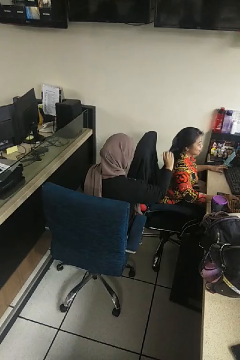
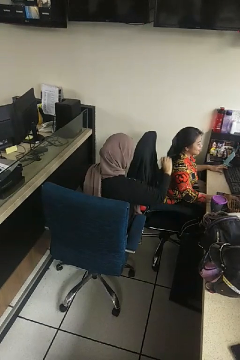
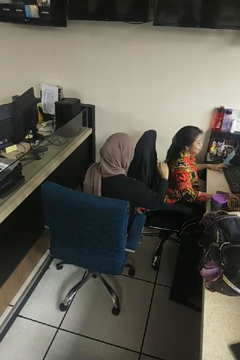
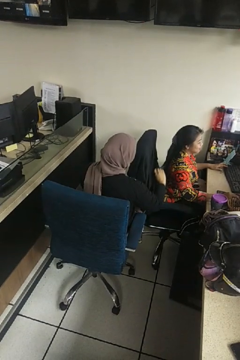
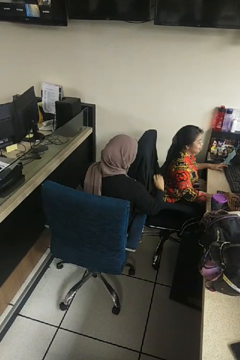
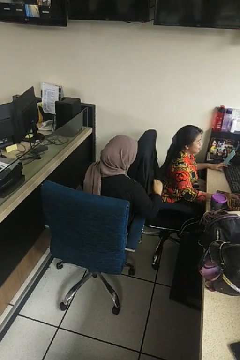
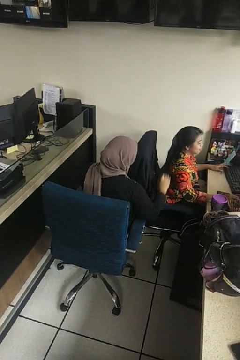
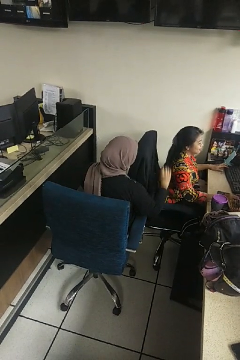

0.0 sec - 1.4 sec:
person brushes hair of person

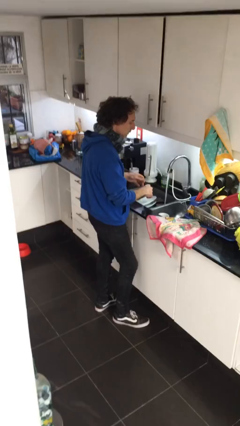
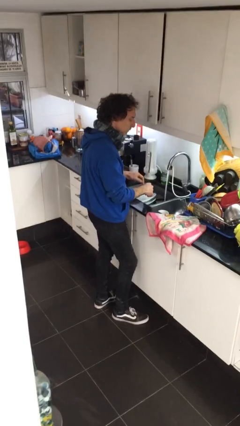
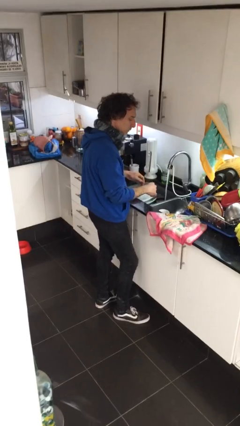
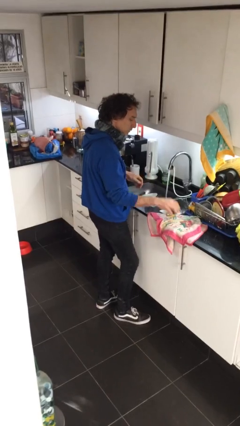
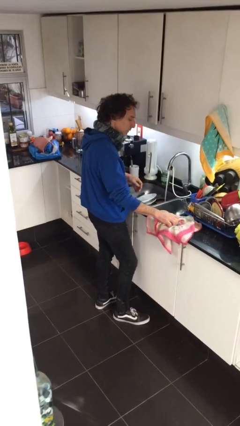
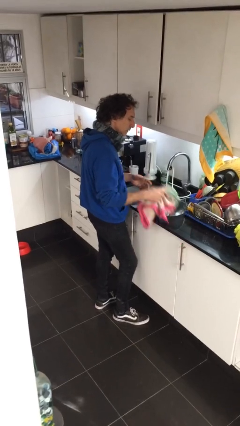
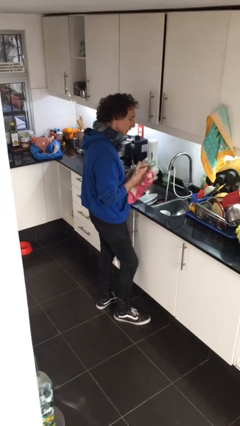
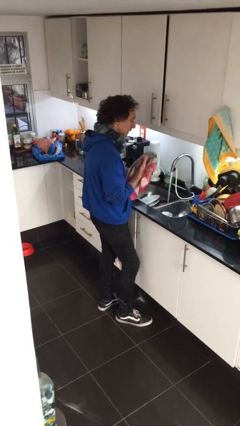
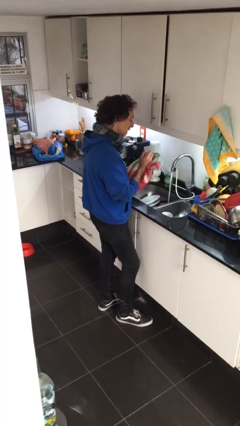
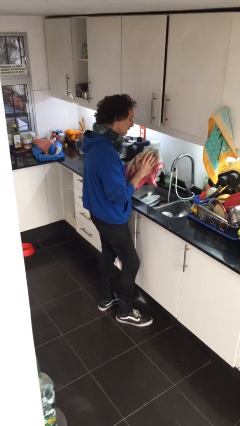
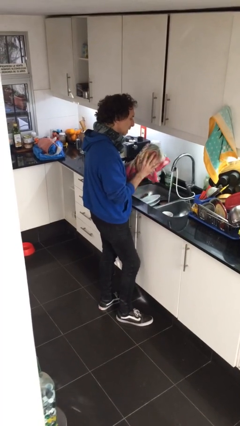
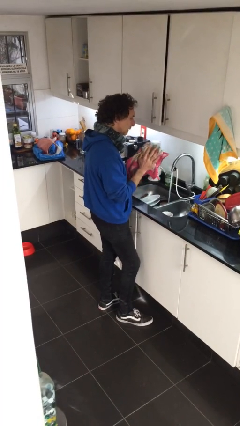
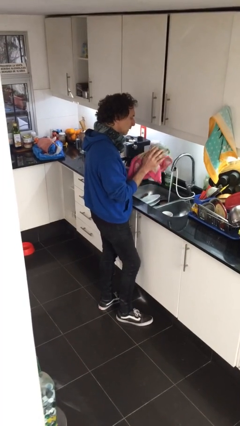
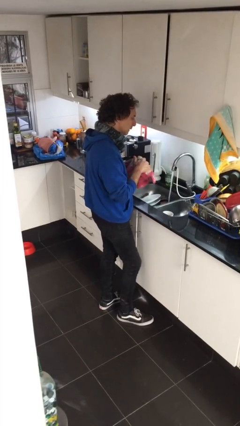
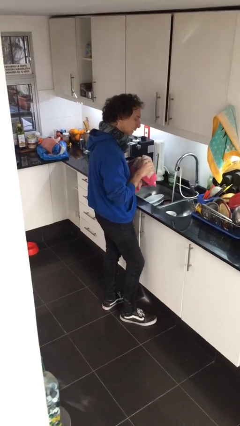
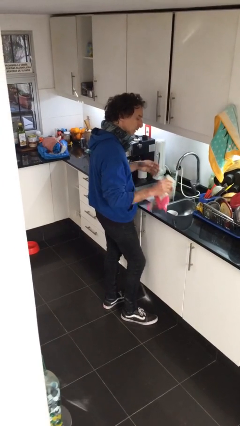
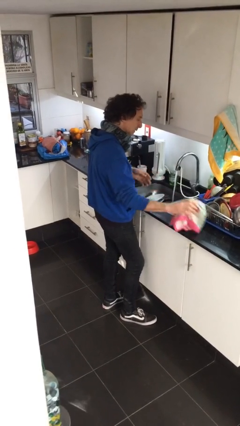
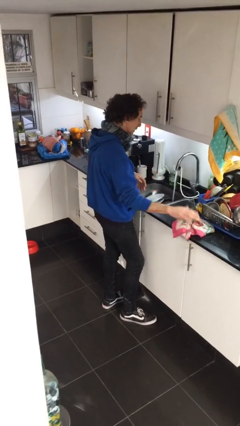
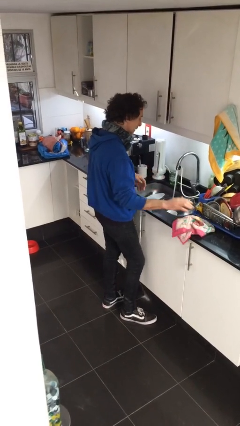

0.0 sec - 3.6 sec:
person dries hands with towel

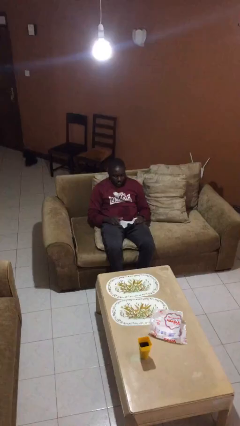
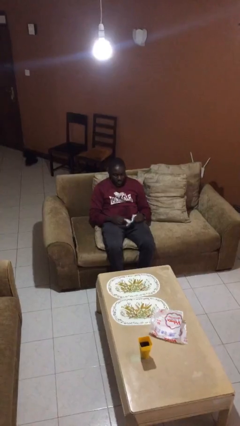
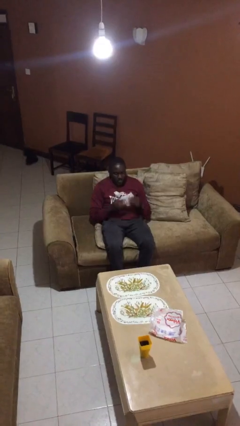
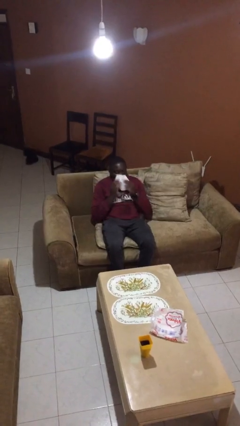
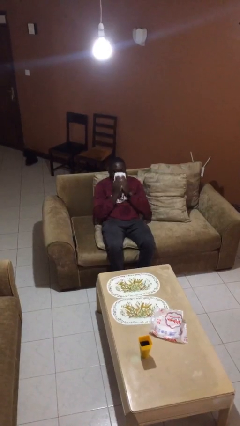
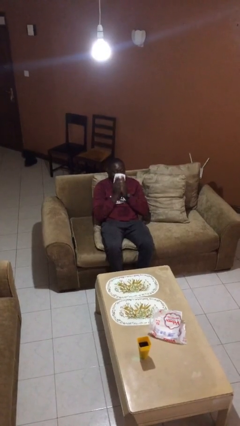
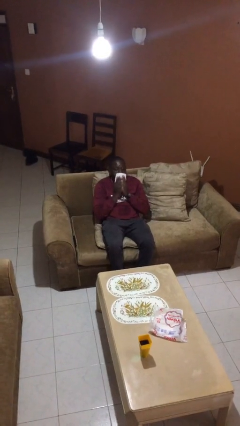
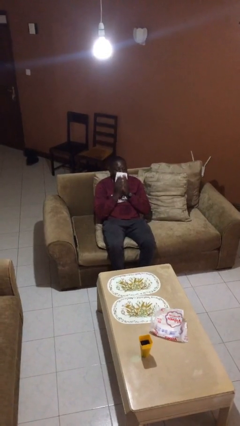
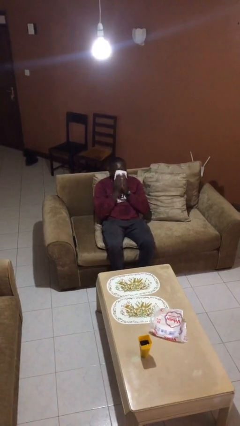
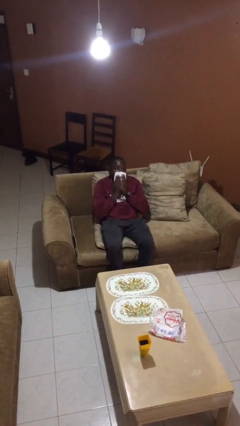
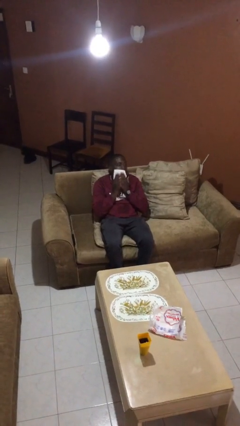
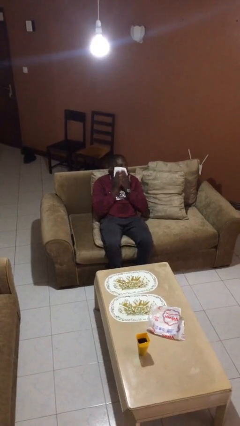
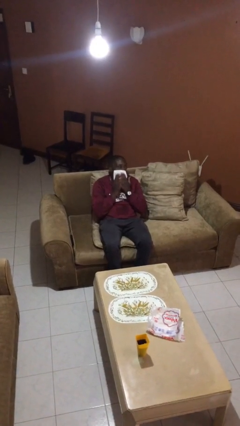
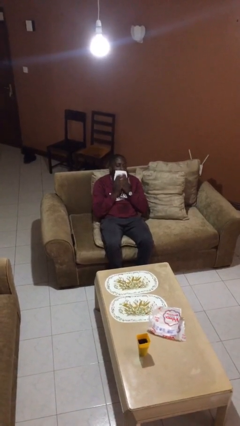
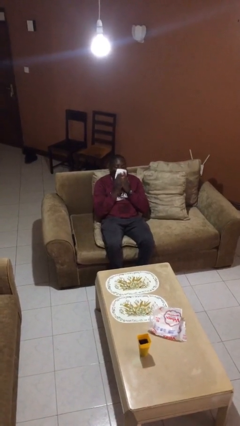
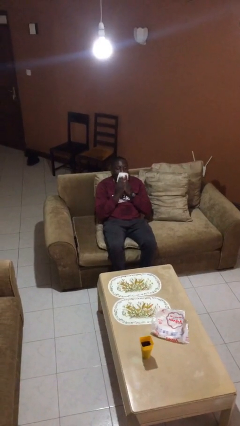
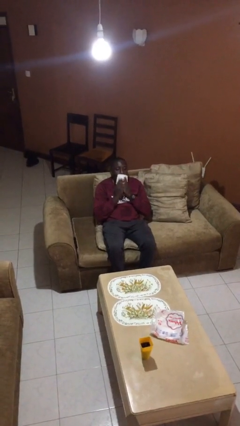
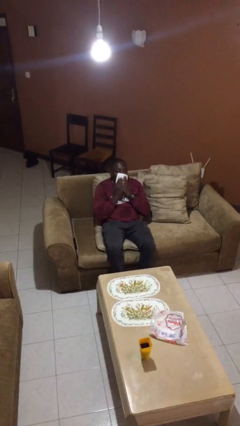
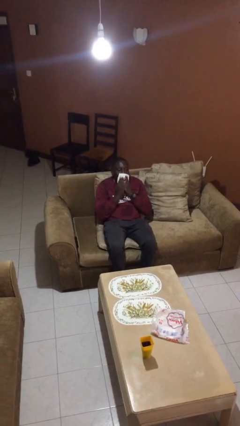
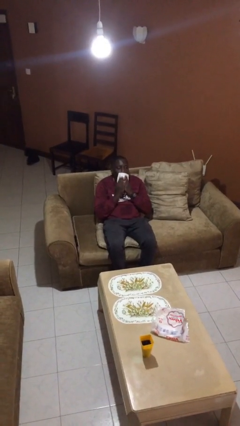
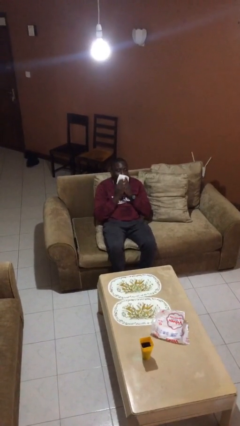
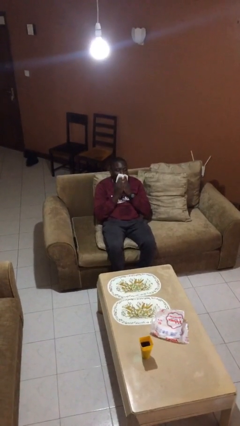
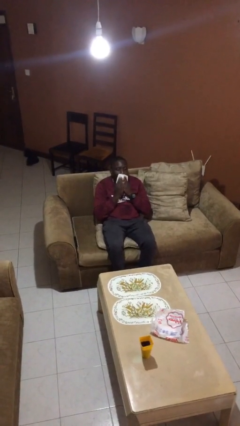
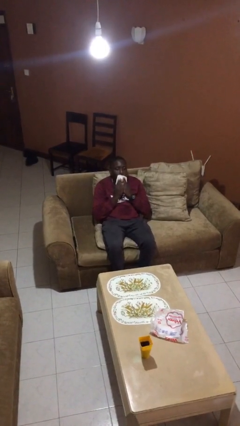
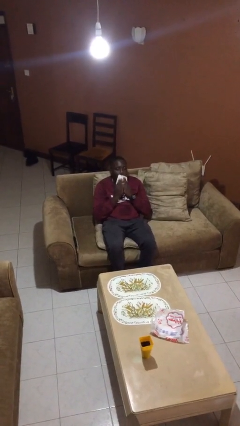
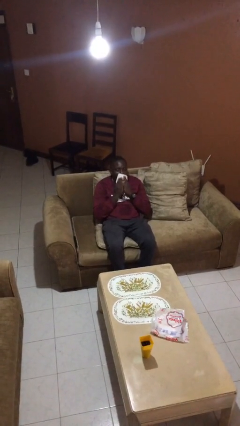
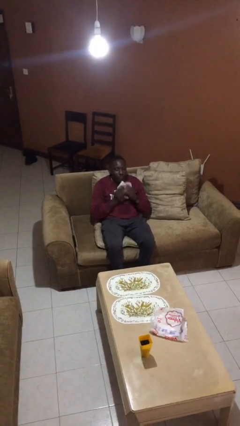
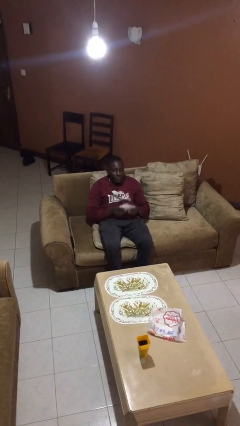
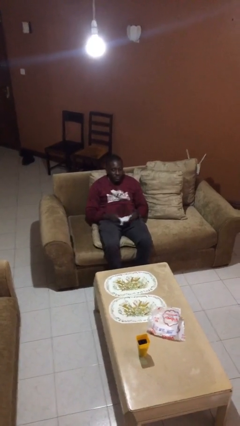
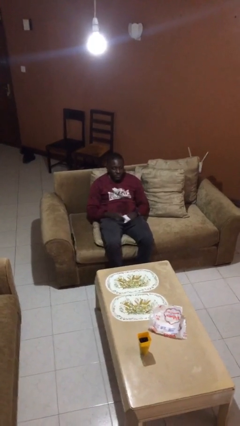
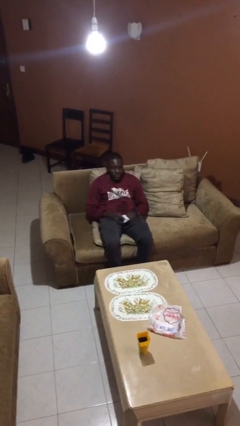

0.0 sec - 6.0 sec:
person wipes mouth with napkin

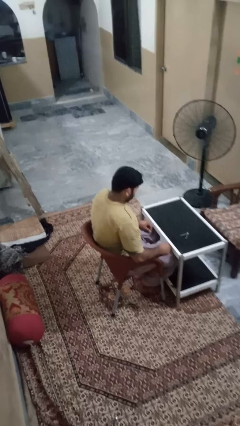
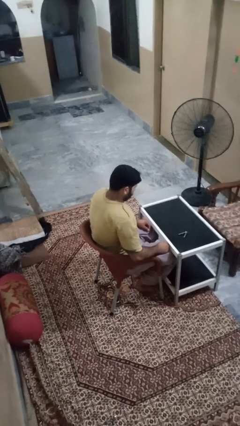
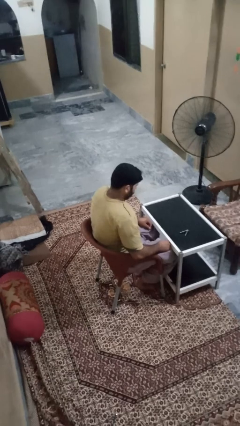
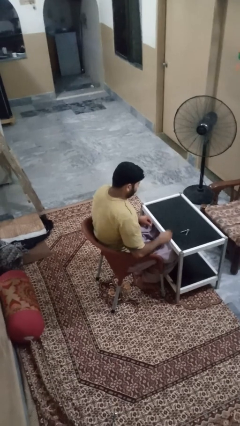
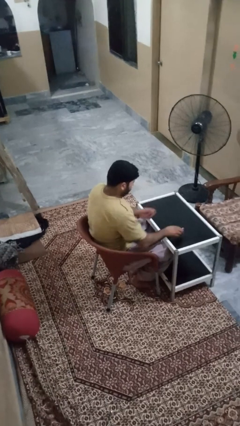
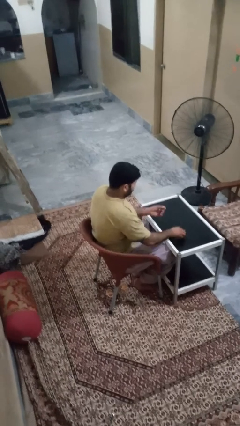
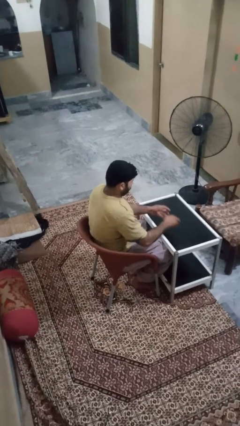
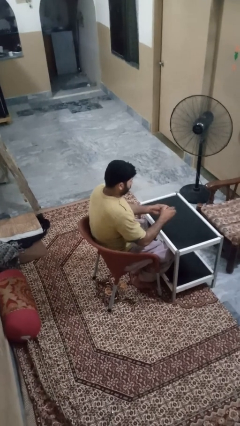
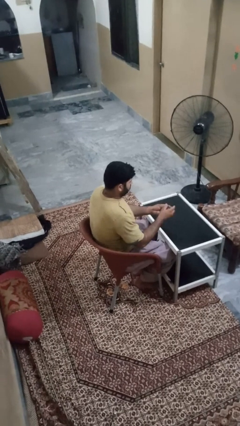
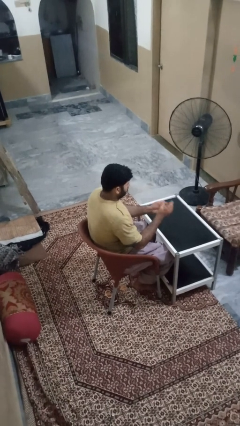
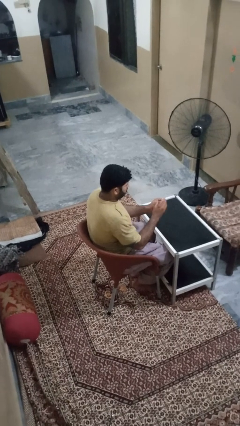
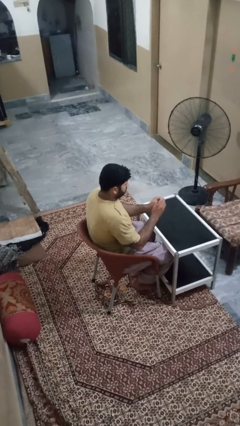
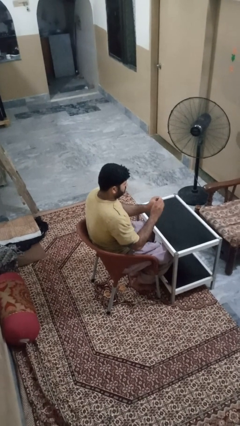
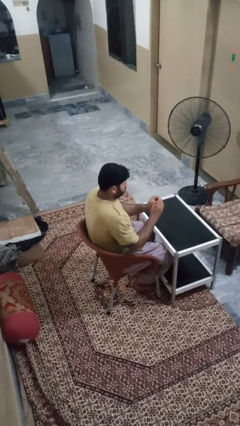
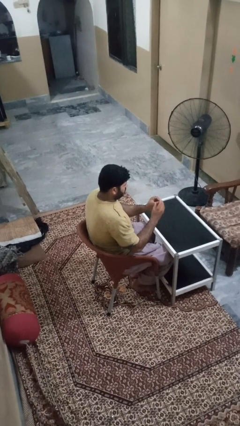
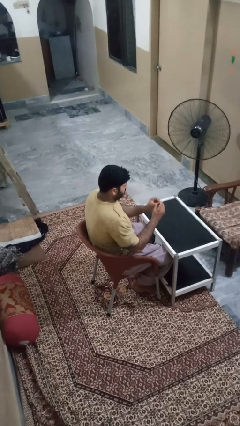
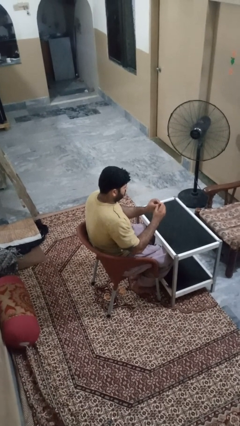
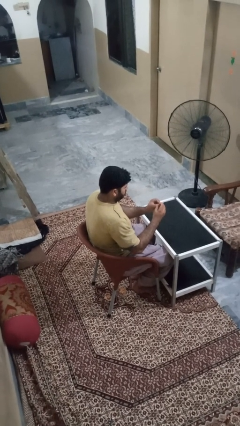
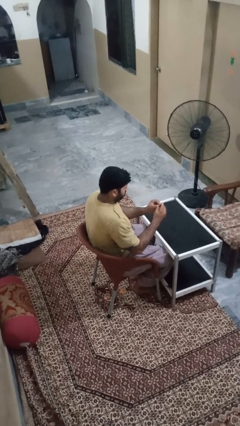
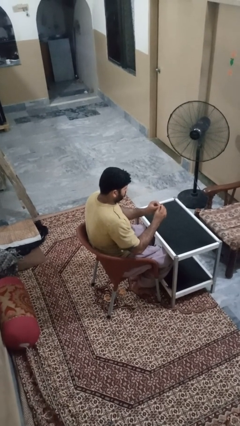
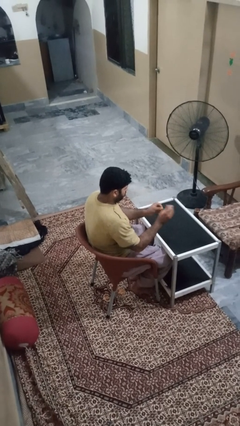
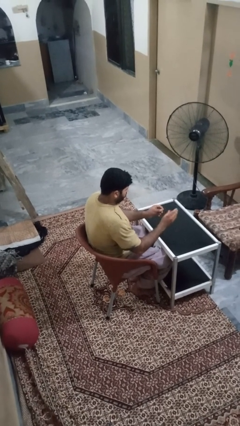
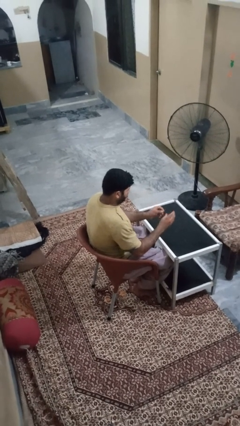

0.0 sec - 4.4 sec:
person clips fingernails

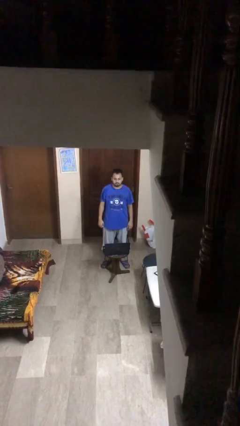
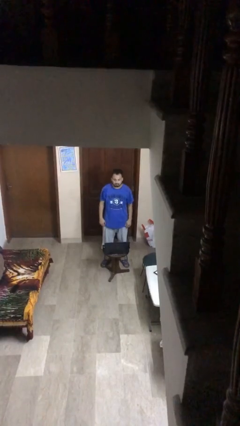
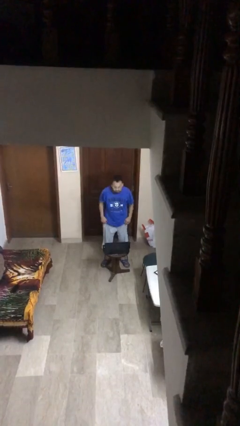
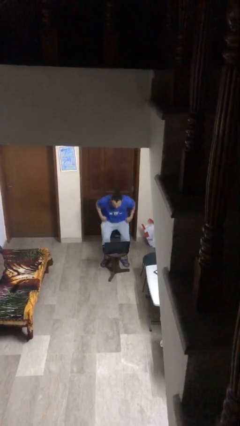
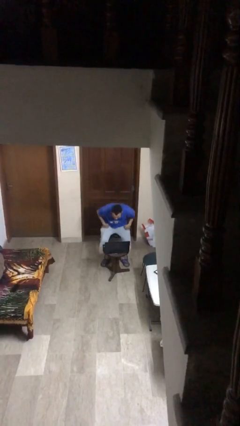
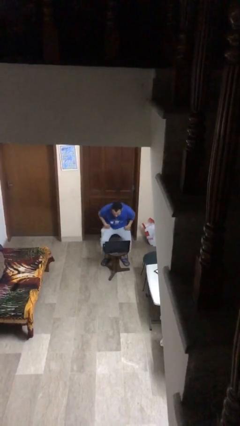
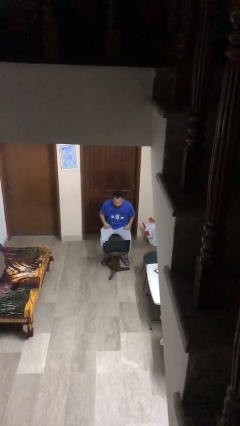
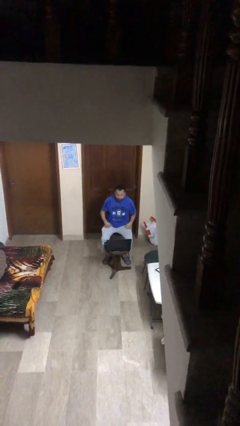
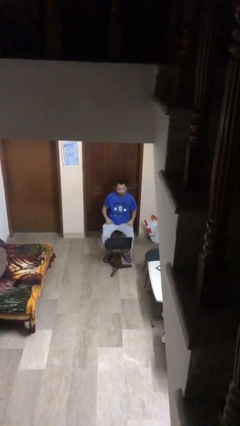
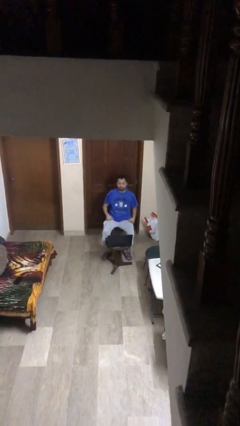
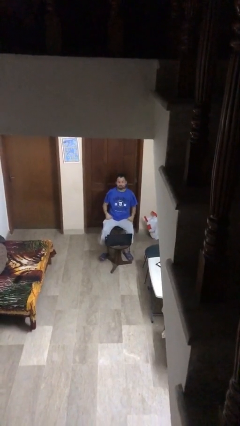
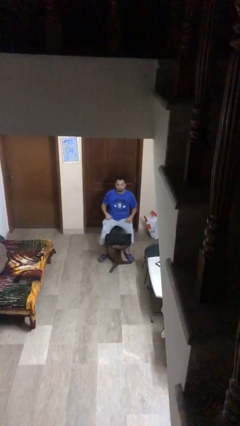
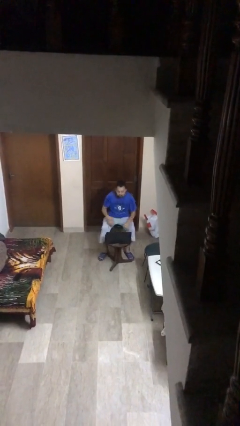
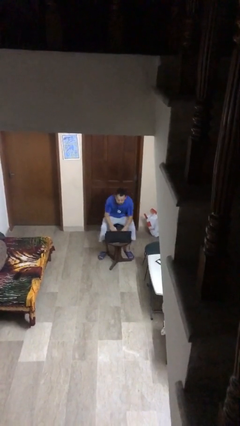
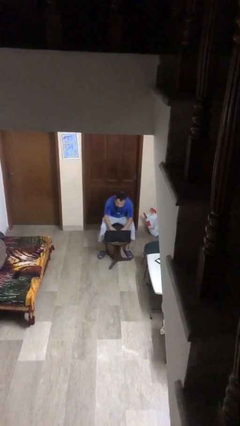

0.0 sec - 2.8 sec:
person sits down
